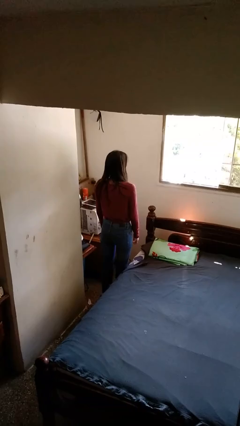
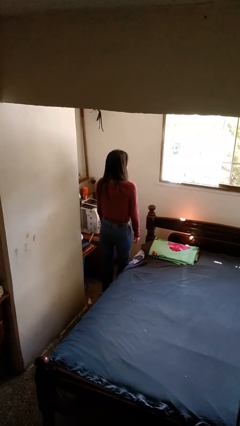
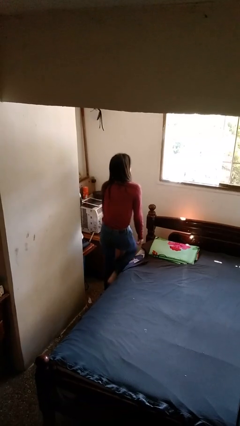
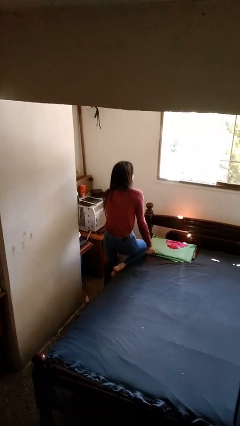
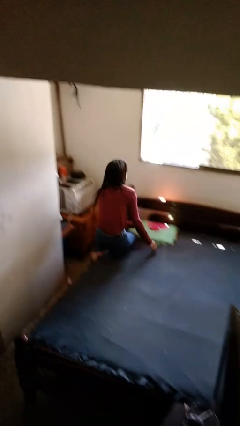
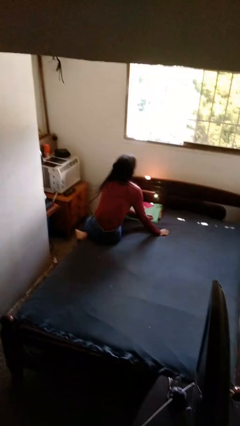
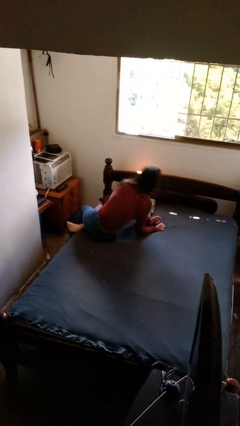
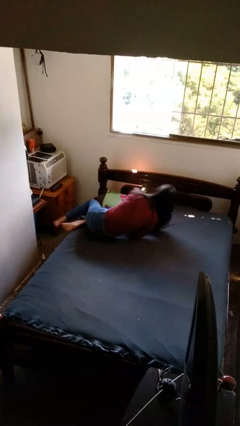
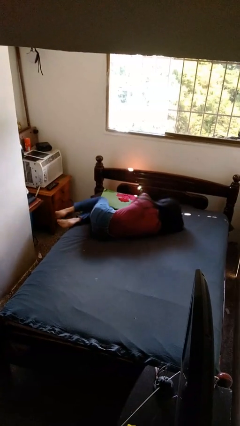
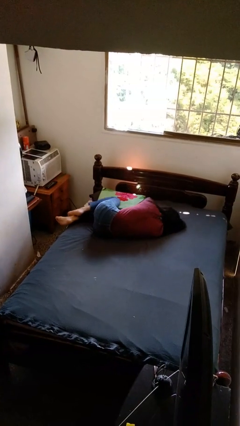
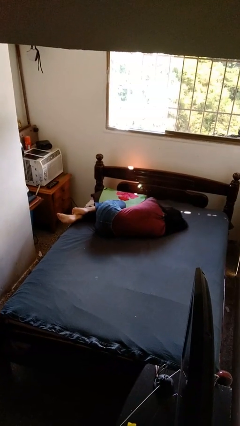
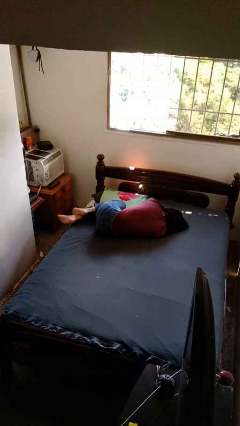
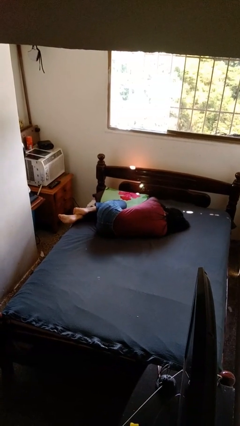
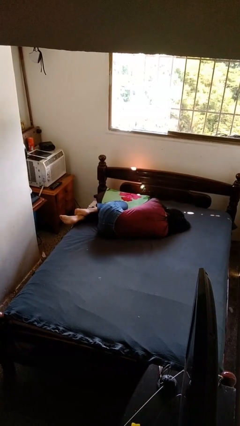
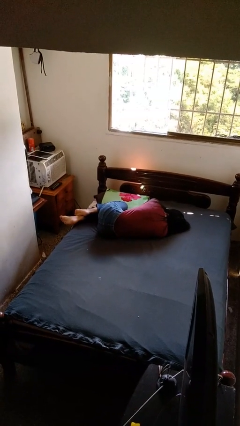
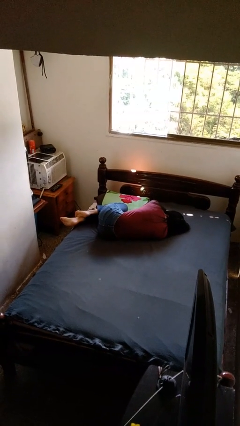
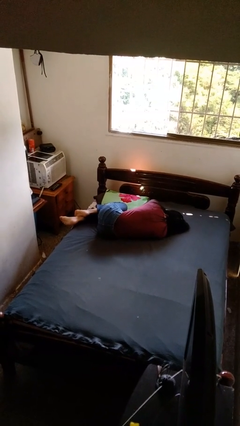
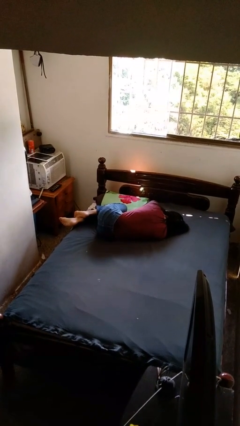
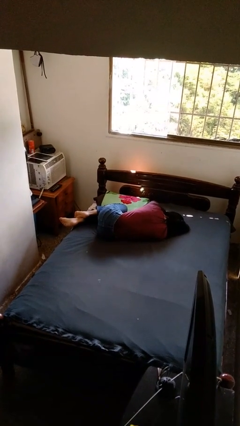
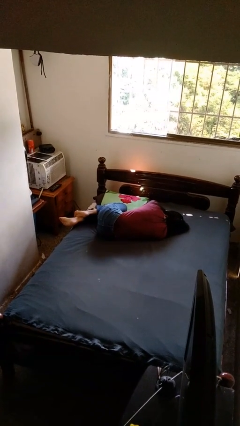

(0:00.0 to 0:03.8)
person lies down on bed

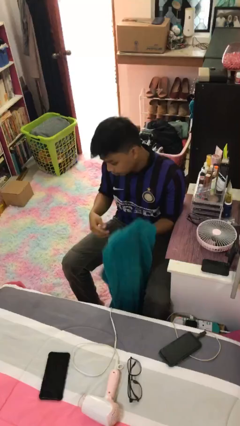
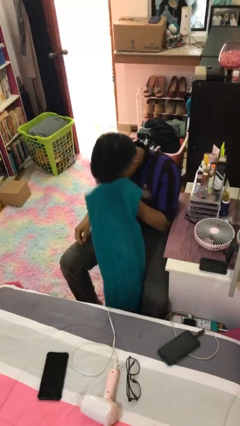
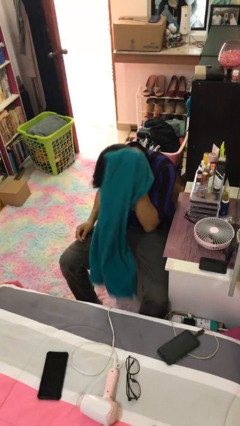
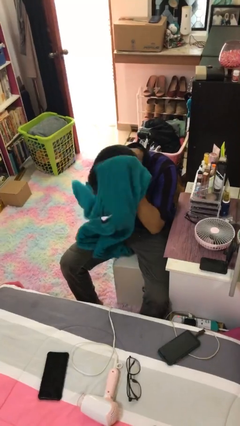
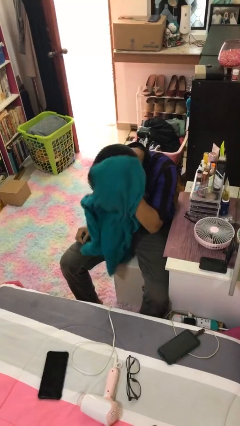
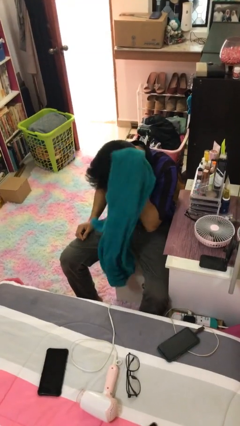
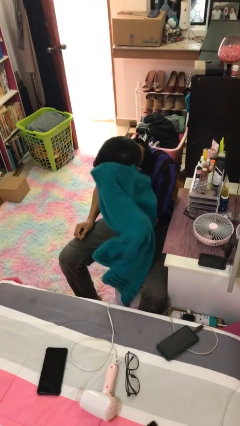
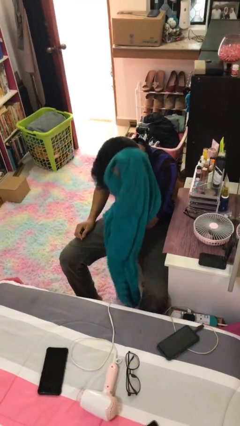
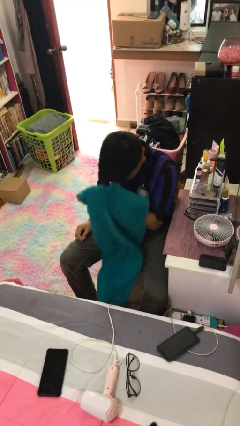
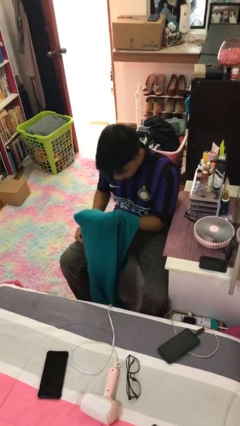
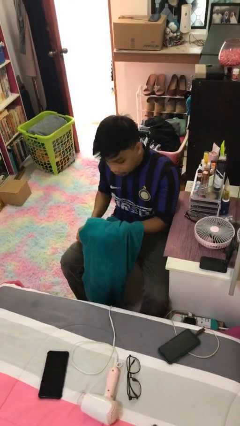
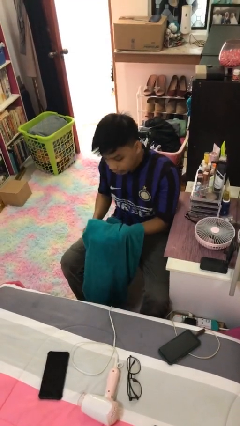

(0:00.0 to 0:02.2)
person dries hair with towel

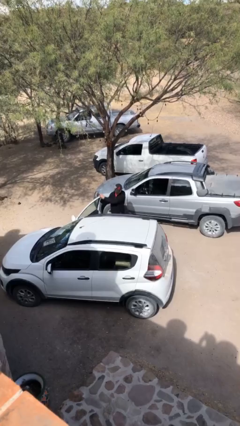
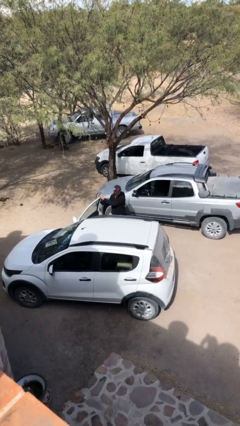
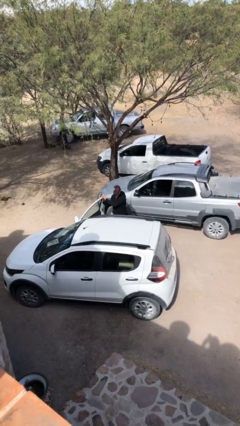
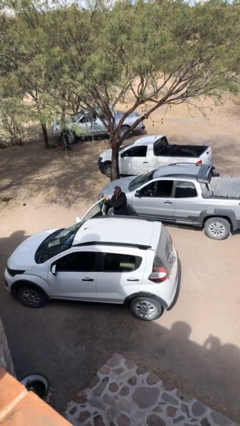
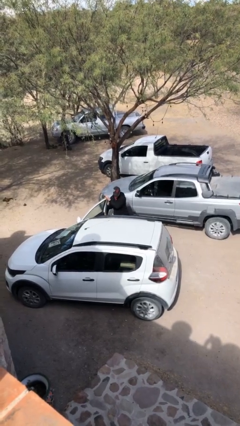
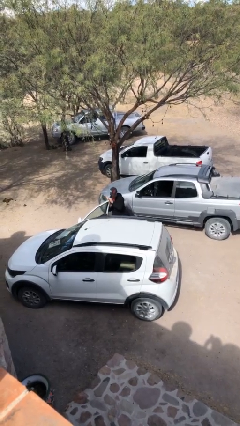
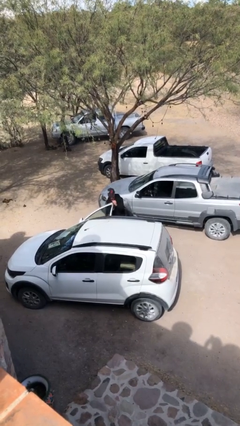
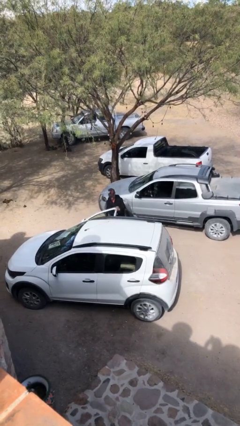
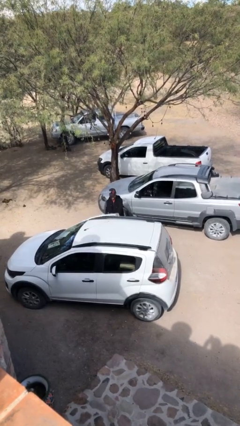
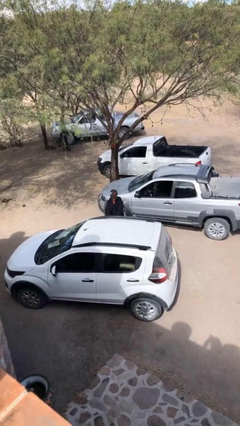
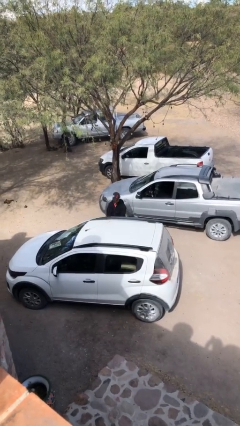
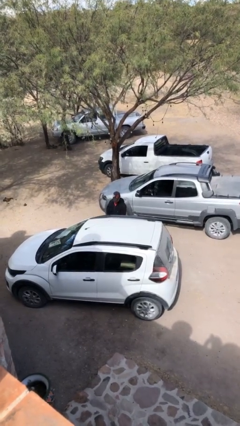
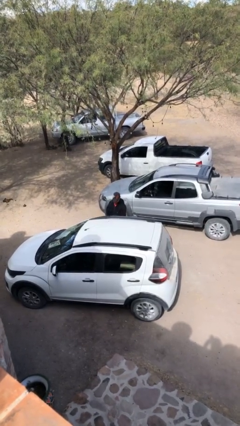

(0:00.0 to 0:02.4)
person closes car door

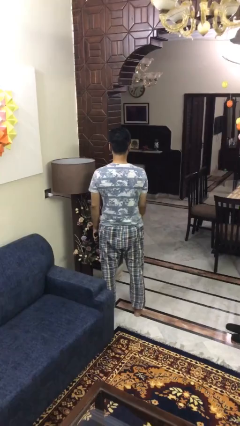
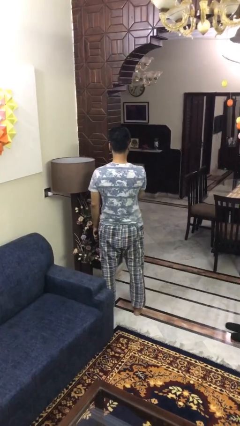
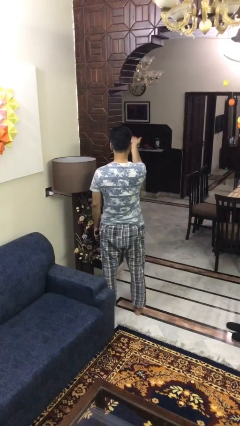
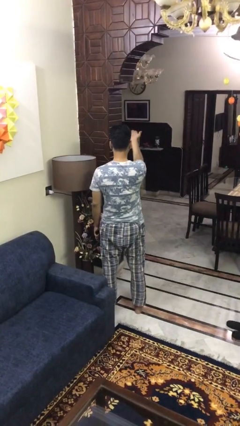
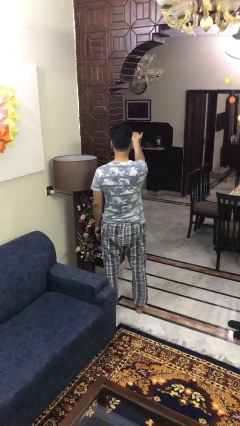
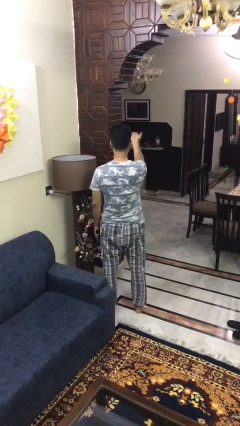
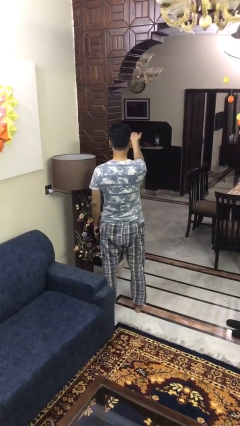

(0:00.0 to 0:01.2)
person gestures swipe up

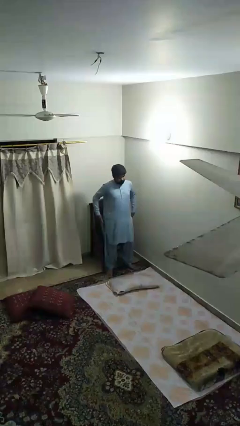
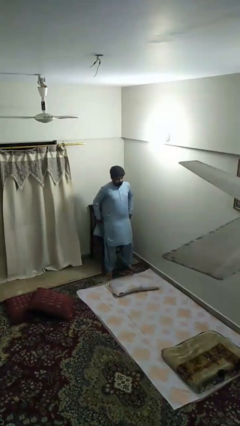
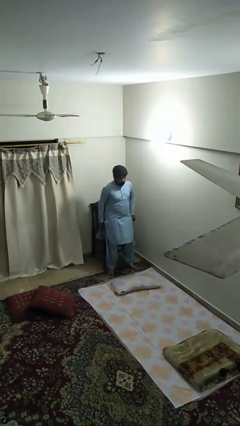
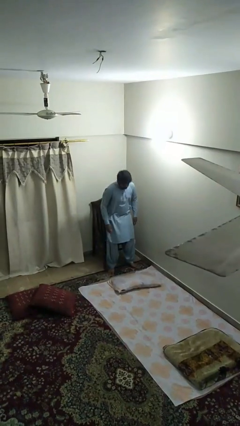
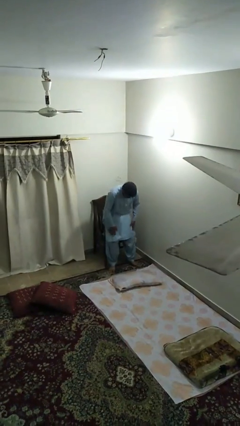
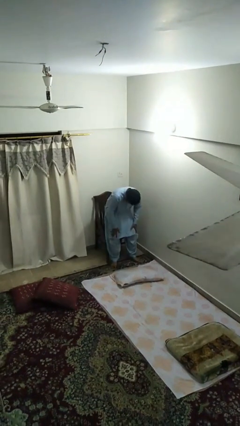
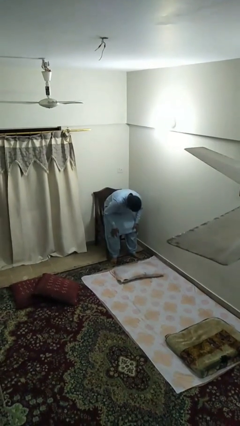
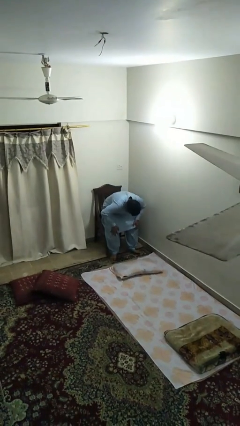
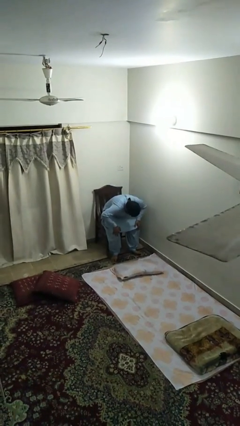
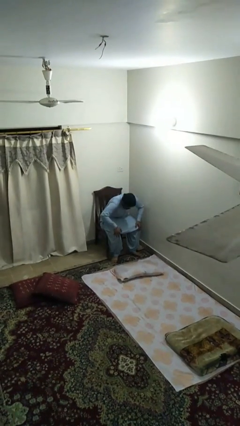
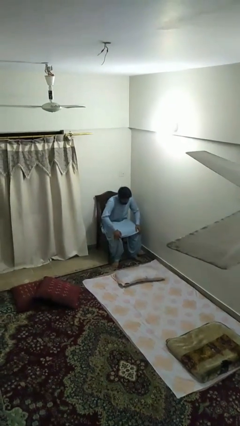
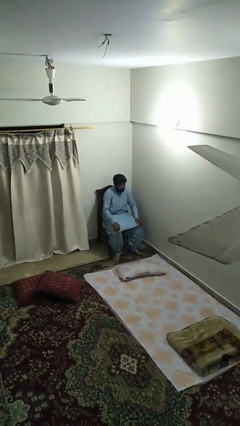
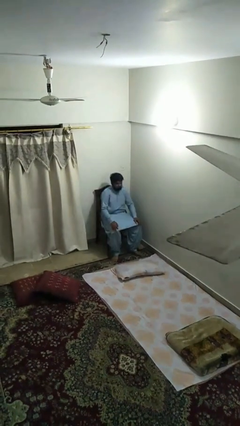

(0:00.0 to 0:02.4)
person sits down

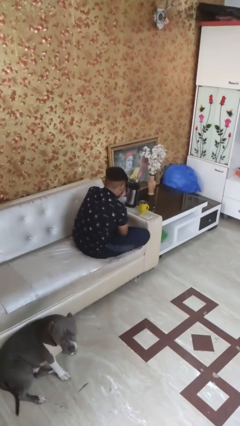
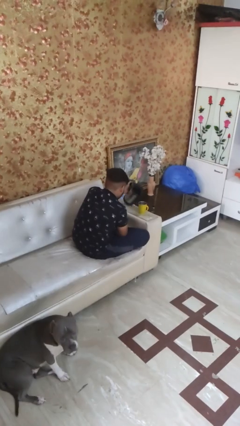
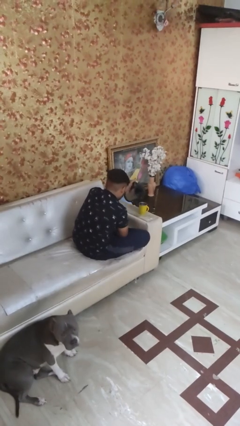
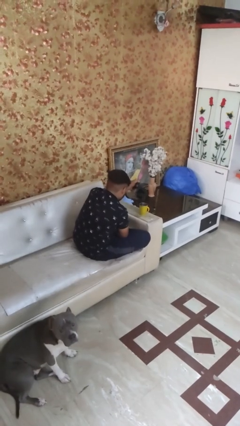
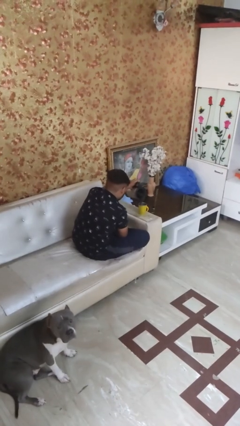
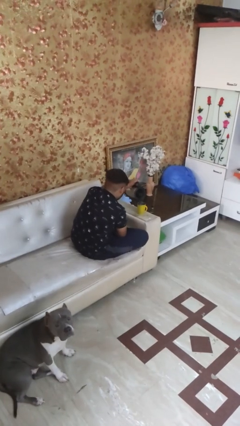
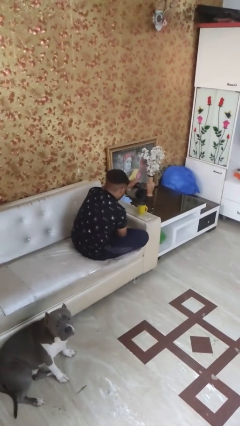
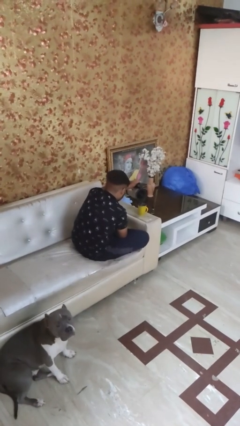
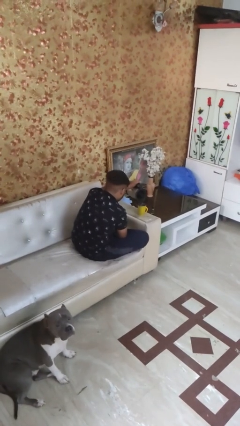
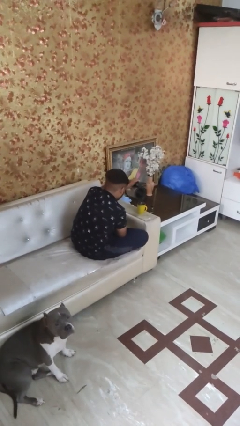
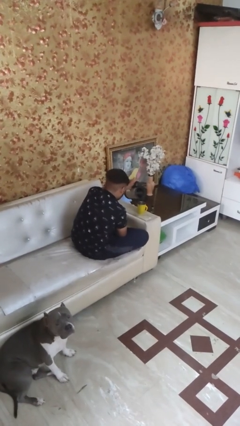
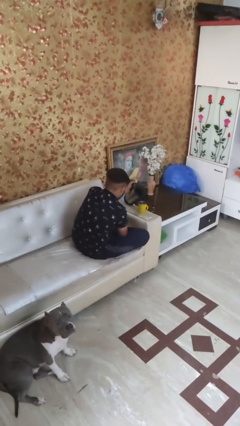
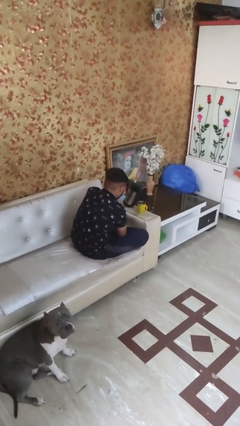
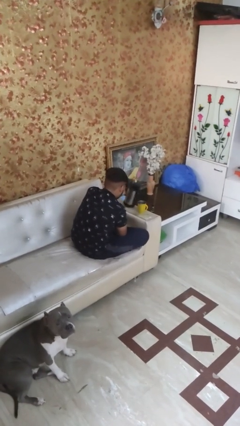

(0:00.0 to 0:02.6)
person pours coffee into mug

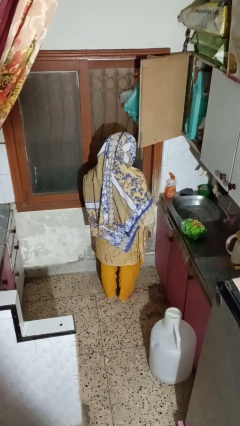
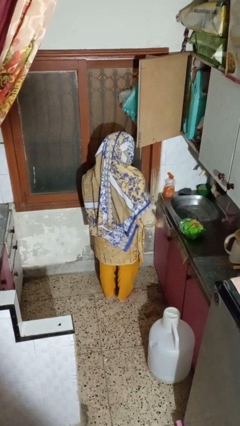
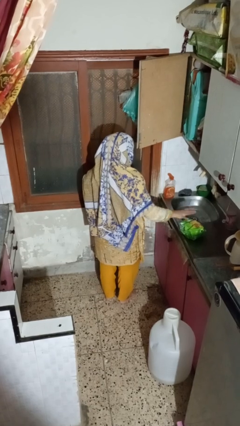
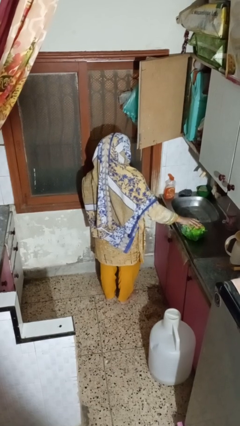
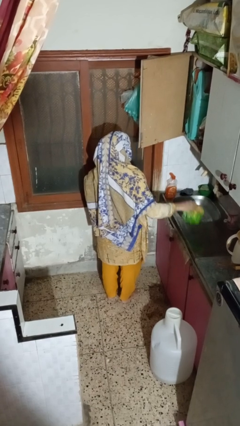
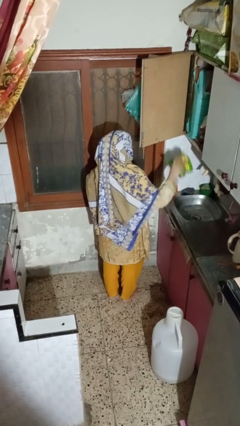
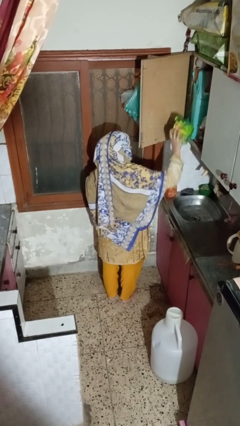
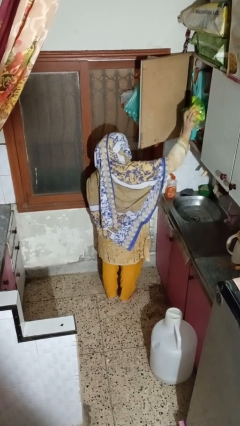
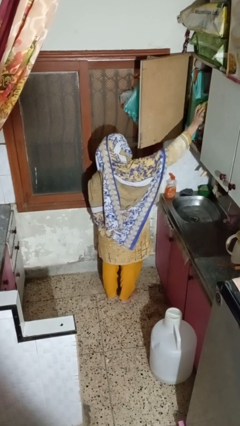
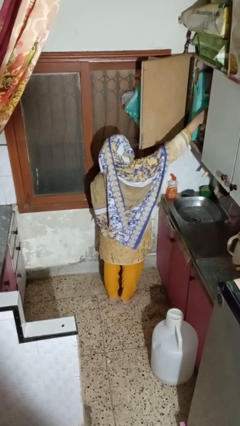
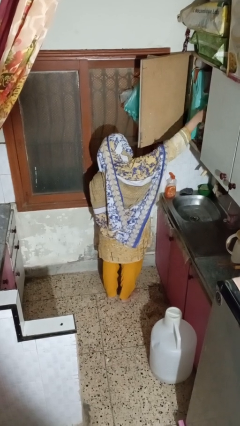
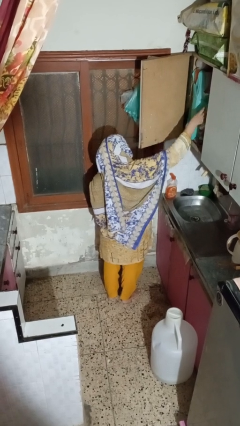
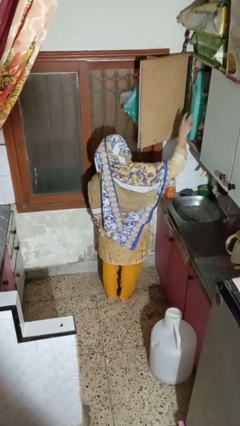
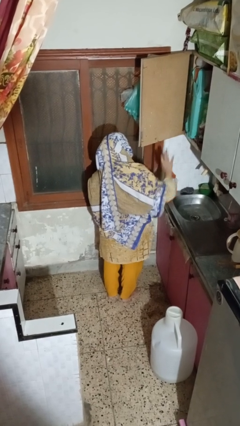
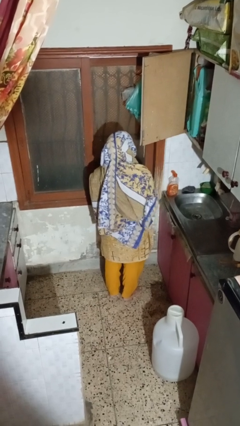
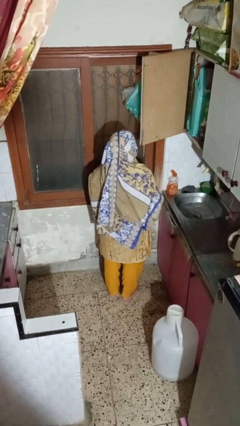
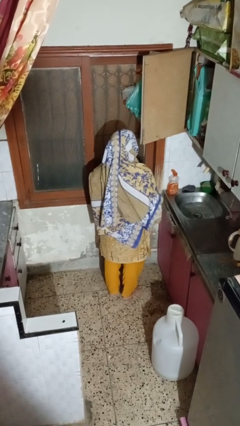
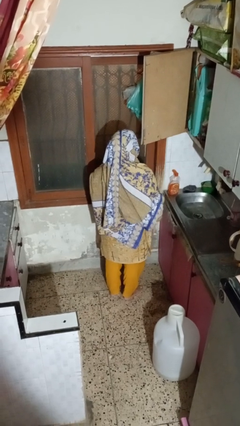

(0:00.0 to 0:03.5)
person puts object in cabinet
